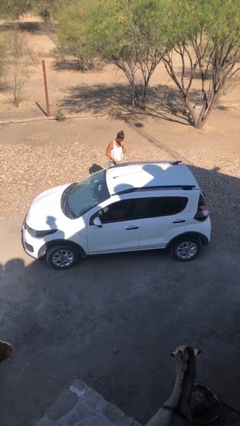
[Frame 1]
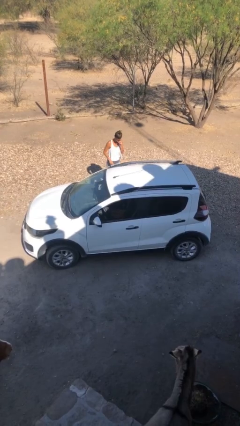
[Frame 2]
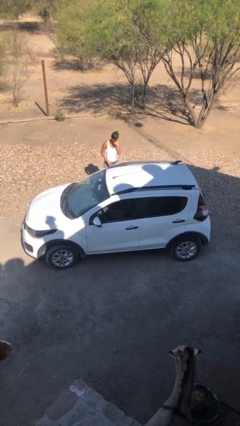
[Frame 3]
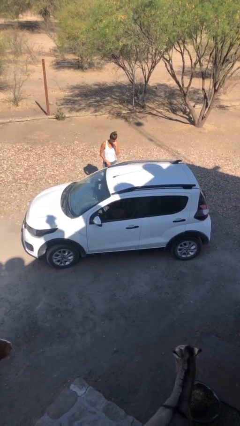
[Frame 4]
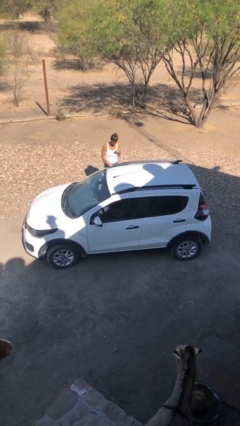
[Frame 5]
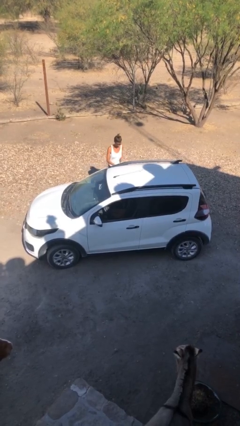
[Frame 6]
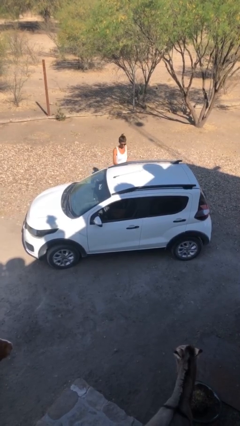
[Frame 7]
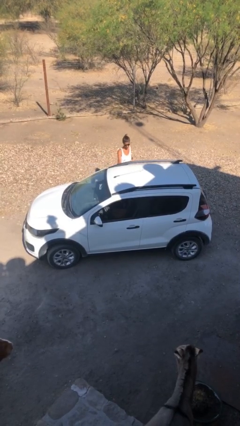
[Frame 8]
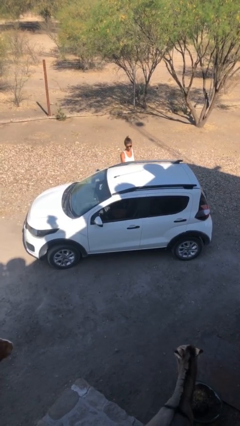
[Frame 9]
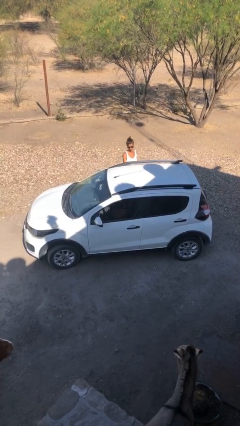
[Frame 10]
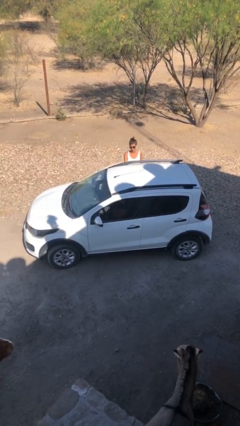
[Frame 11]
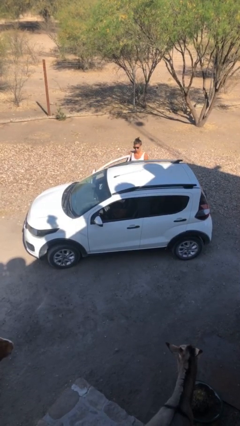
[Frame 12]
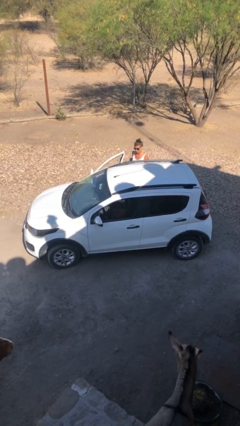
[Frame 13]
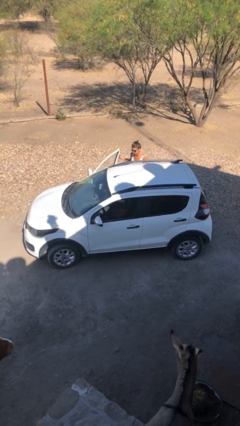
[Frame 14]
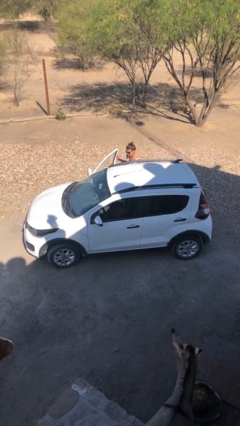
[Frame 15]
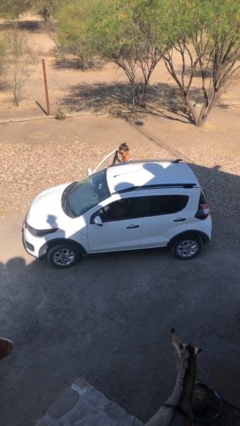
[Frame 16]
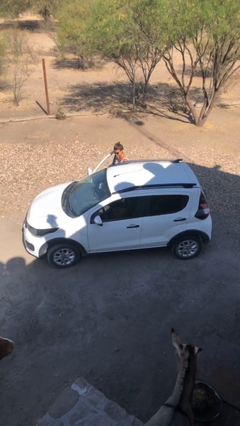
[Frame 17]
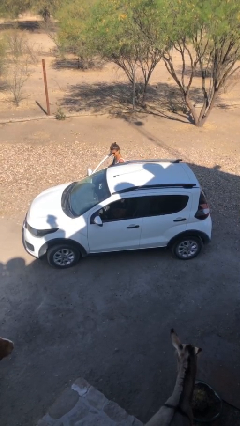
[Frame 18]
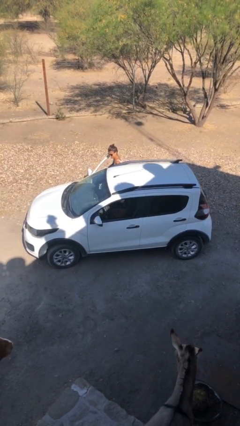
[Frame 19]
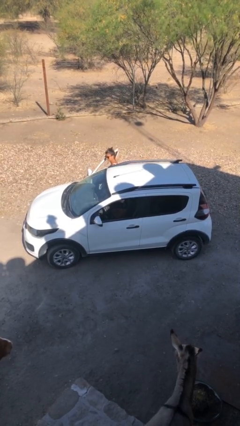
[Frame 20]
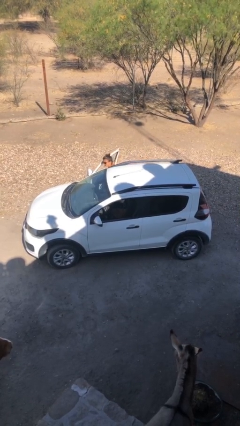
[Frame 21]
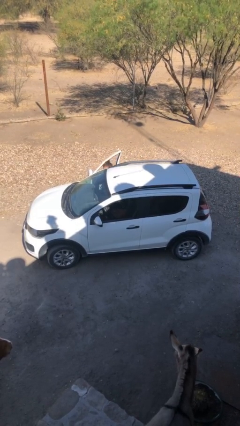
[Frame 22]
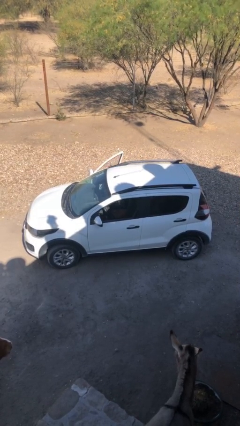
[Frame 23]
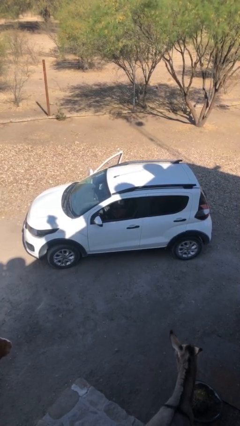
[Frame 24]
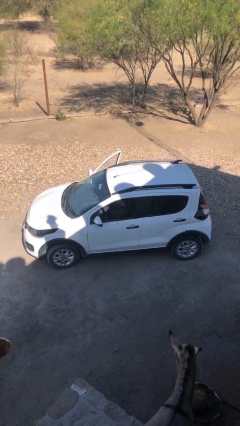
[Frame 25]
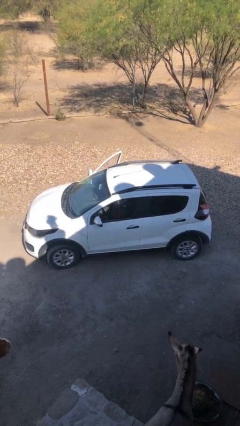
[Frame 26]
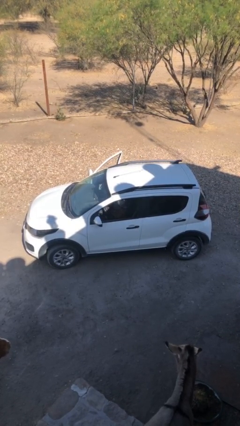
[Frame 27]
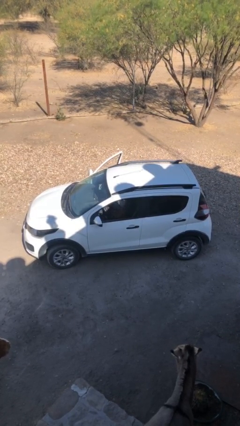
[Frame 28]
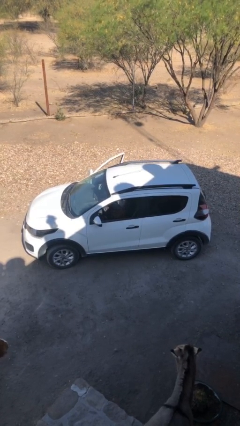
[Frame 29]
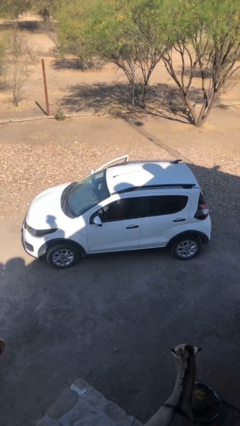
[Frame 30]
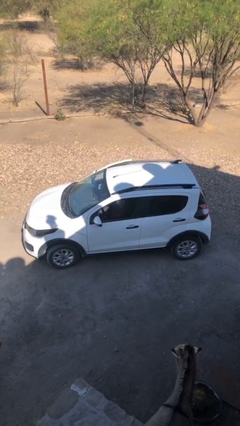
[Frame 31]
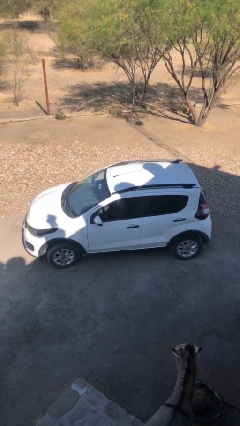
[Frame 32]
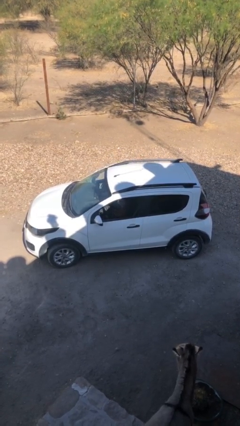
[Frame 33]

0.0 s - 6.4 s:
car picks up person

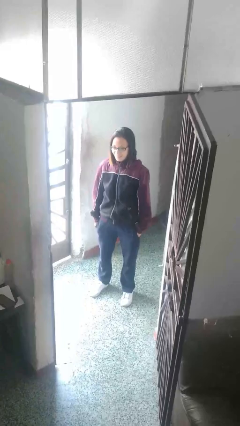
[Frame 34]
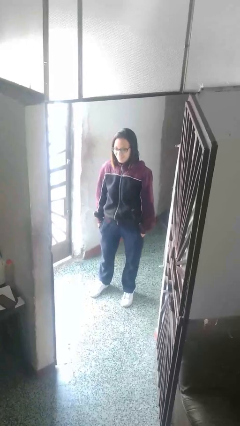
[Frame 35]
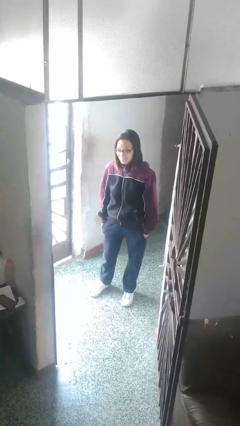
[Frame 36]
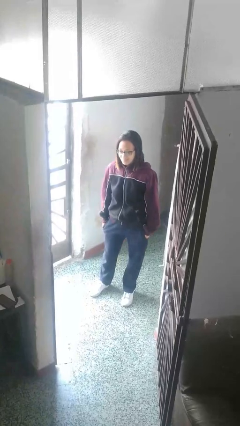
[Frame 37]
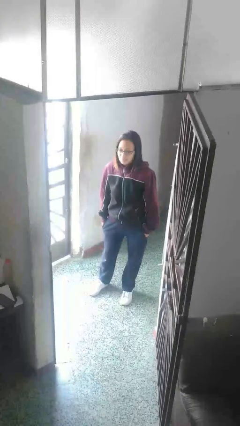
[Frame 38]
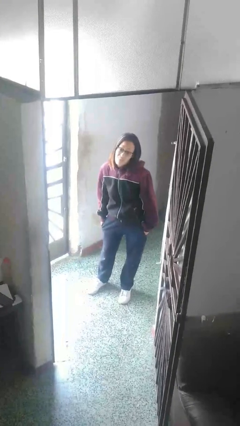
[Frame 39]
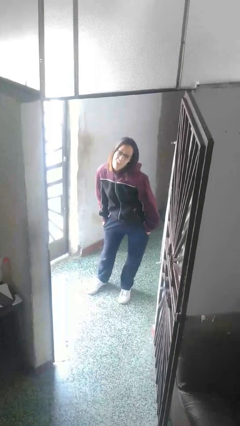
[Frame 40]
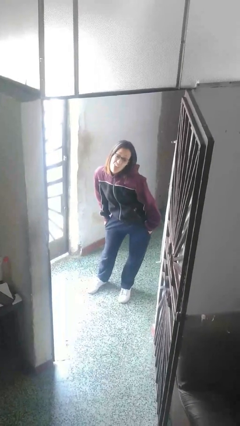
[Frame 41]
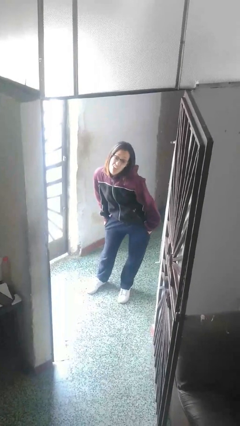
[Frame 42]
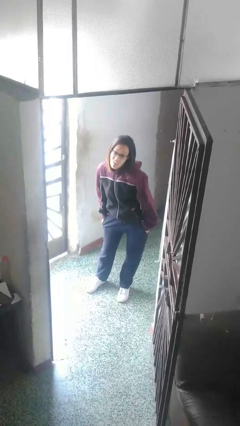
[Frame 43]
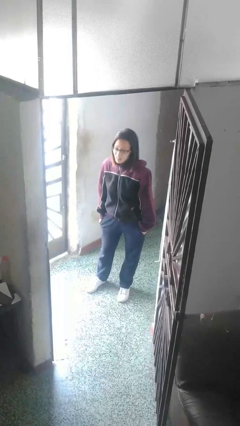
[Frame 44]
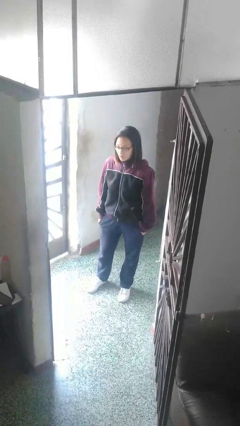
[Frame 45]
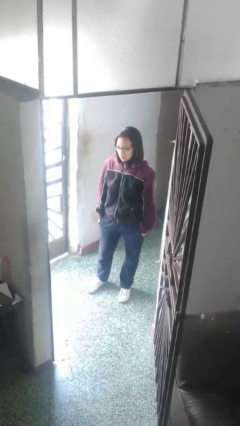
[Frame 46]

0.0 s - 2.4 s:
person sticks out tongue

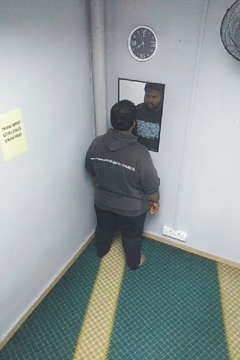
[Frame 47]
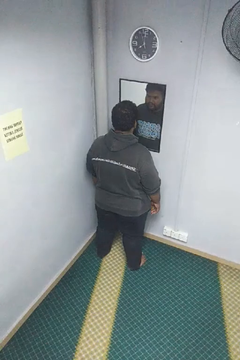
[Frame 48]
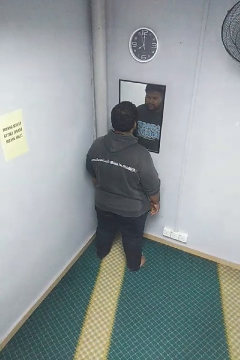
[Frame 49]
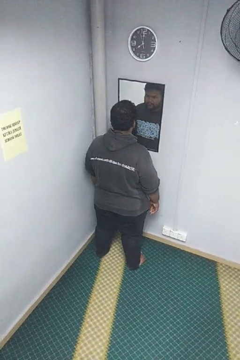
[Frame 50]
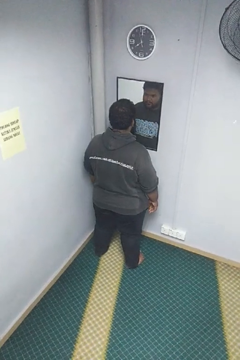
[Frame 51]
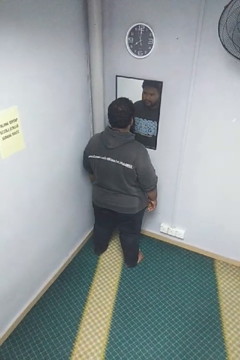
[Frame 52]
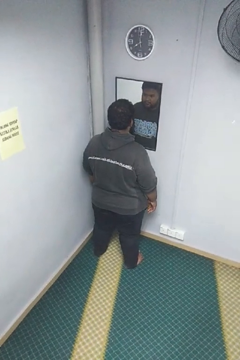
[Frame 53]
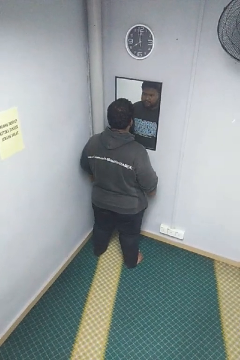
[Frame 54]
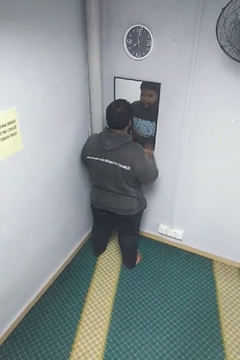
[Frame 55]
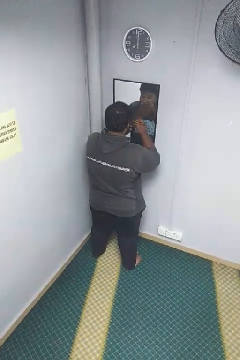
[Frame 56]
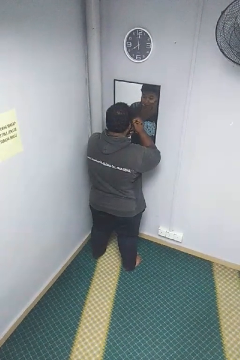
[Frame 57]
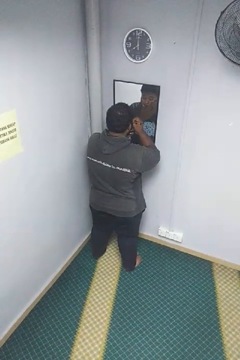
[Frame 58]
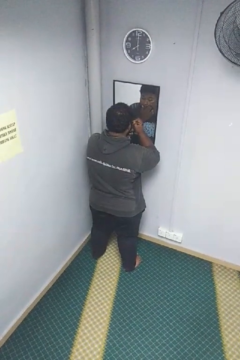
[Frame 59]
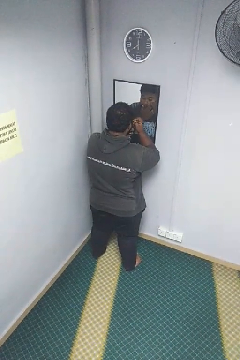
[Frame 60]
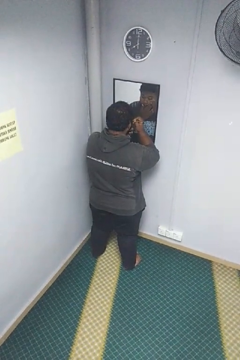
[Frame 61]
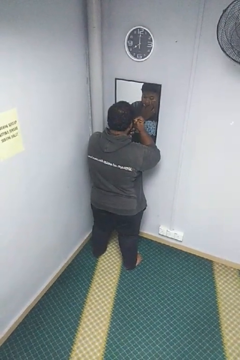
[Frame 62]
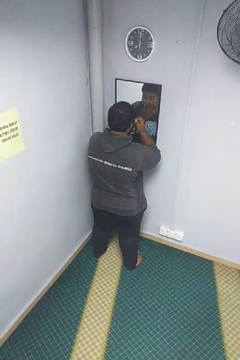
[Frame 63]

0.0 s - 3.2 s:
person applies eye makeup

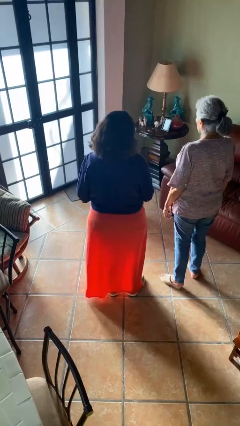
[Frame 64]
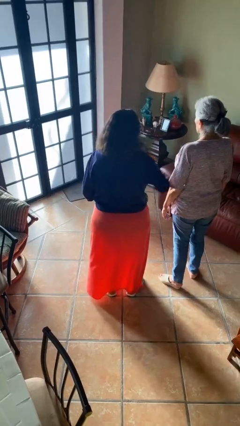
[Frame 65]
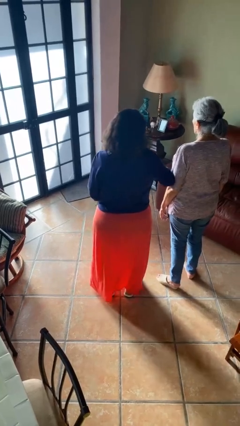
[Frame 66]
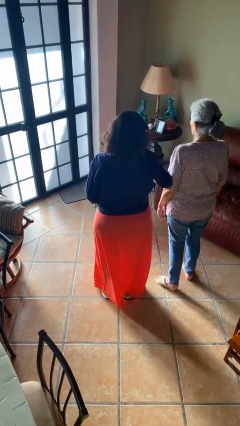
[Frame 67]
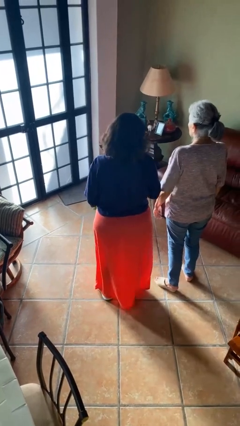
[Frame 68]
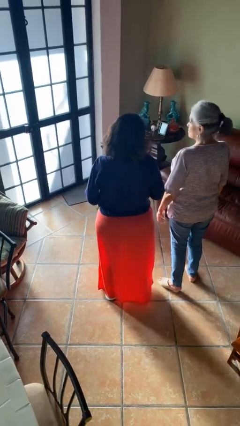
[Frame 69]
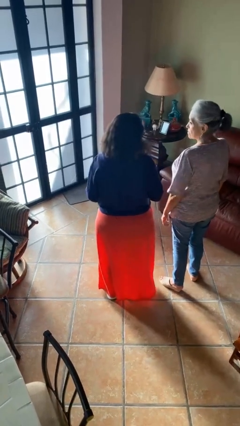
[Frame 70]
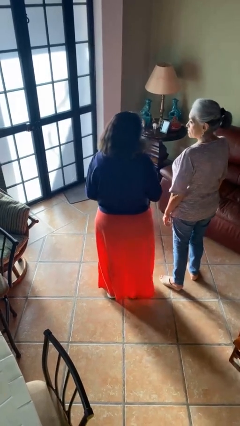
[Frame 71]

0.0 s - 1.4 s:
person nudges person with elbow

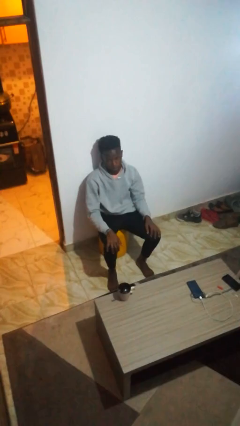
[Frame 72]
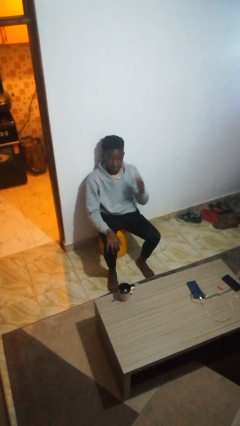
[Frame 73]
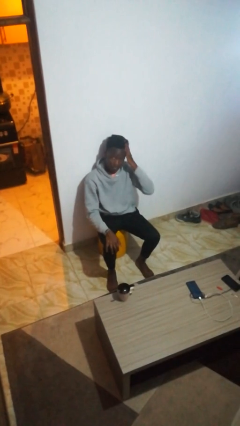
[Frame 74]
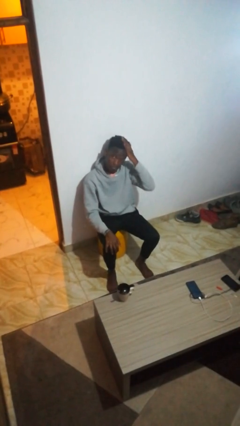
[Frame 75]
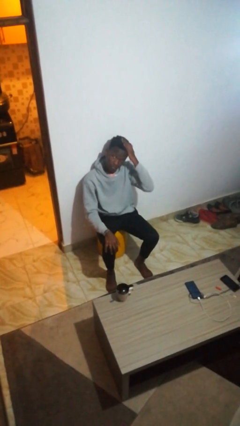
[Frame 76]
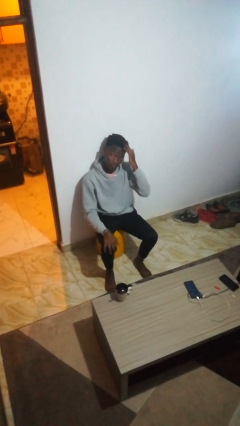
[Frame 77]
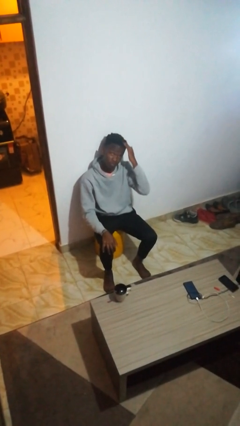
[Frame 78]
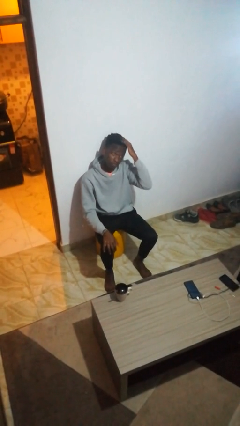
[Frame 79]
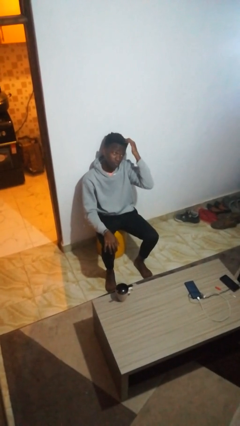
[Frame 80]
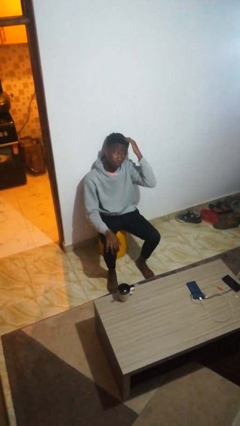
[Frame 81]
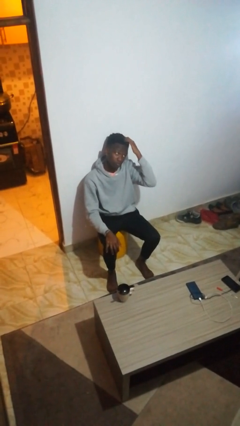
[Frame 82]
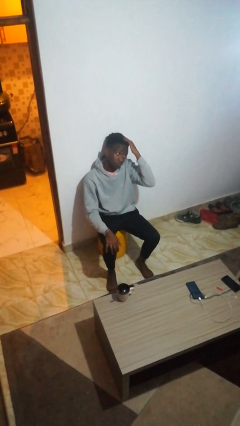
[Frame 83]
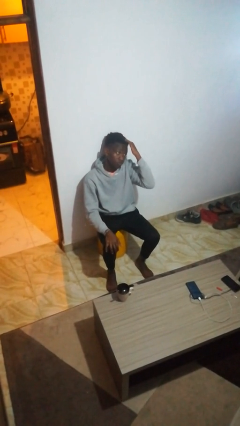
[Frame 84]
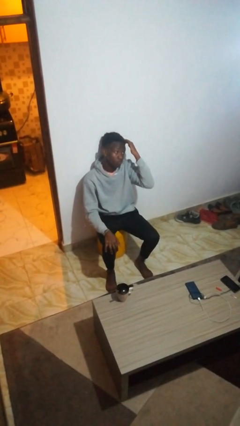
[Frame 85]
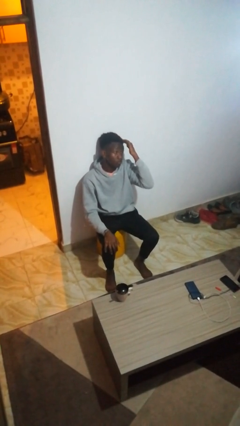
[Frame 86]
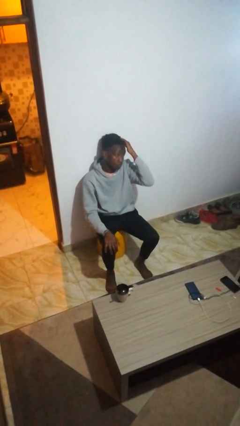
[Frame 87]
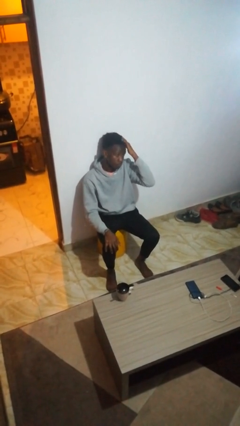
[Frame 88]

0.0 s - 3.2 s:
person strokes hair

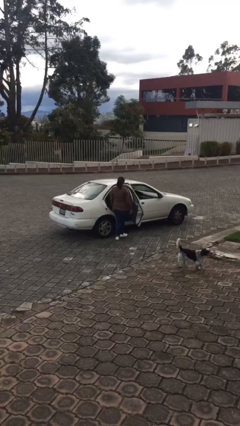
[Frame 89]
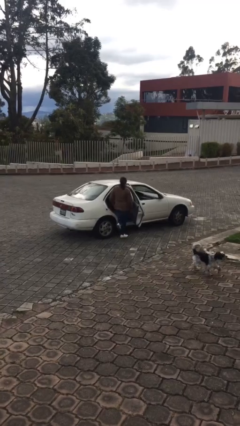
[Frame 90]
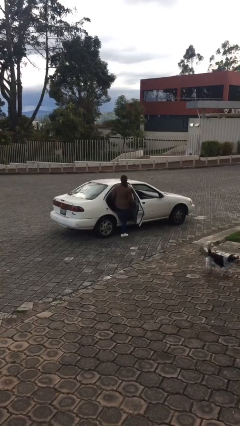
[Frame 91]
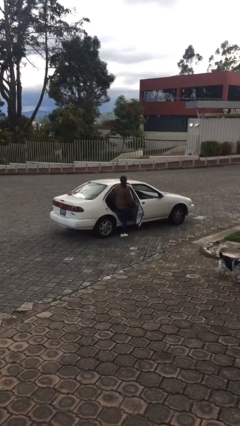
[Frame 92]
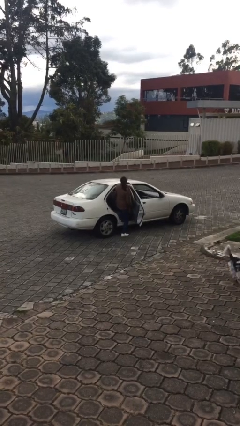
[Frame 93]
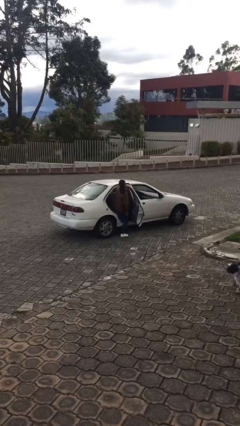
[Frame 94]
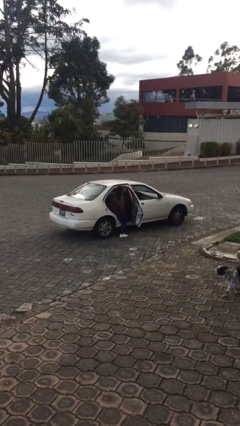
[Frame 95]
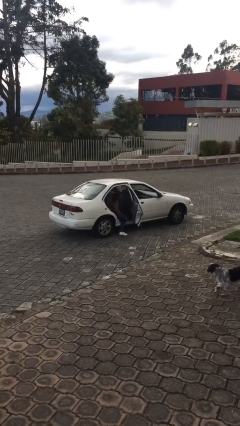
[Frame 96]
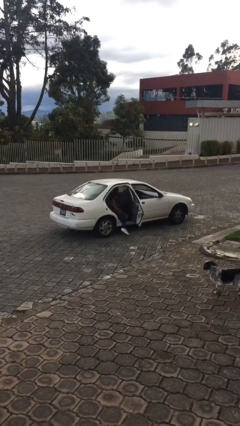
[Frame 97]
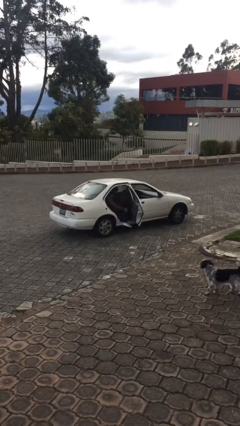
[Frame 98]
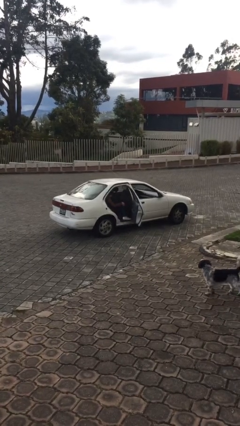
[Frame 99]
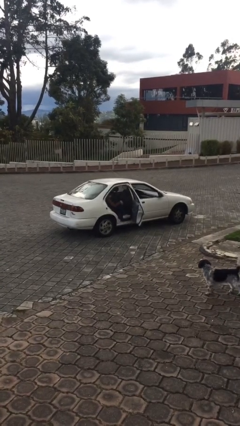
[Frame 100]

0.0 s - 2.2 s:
person enters car
